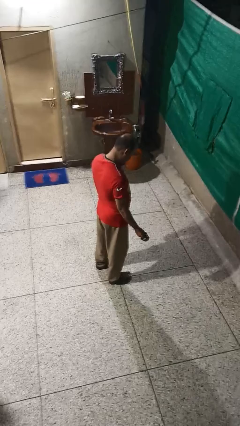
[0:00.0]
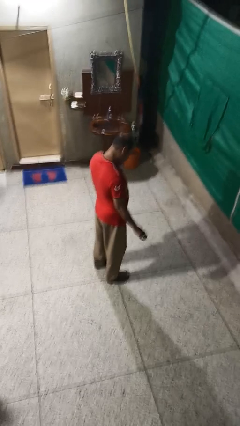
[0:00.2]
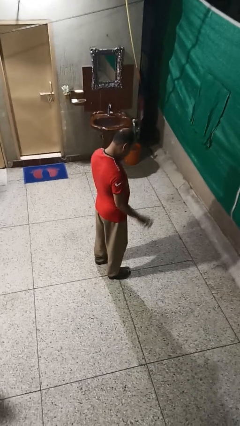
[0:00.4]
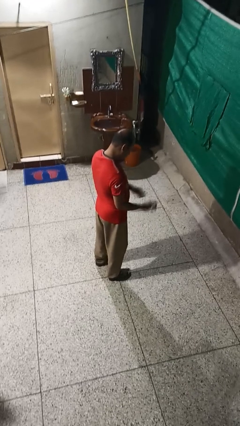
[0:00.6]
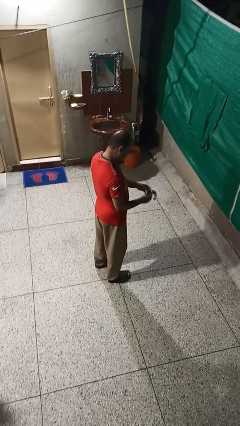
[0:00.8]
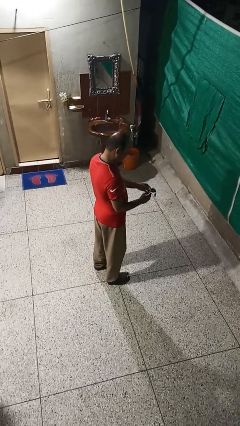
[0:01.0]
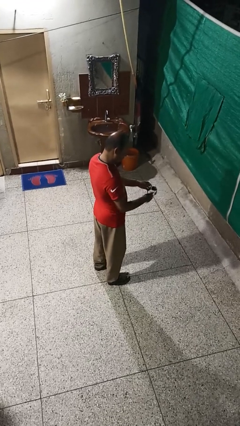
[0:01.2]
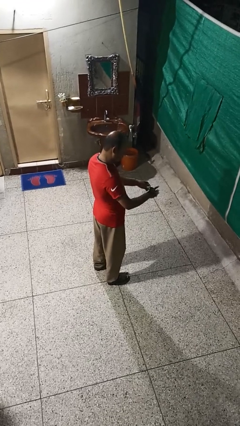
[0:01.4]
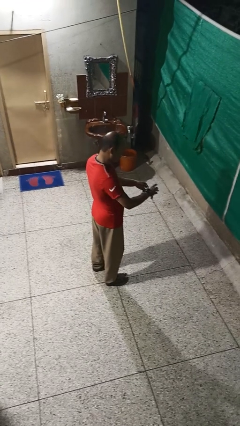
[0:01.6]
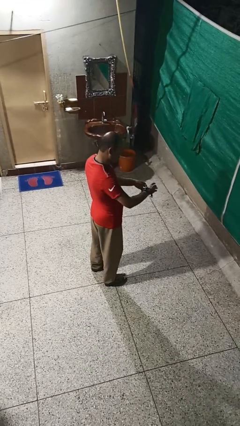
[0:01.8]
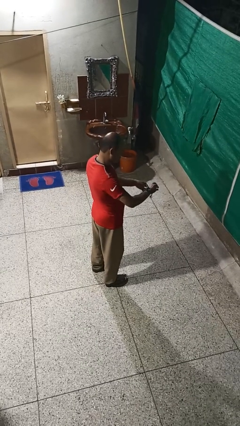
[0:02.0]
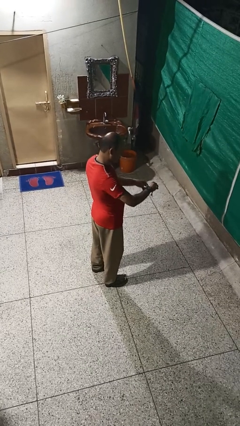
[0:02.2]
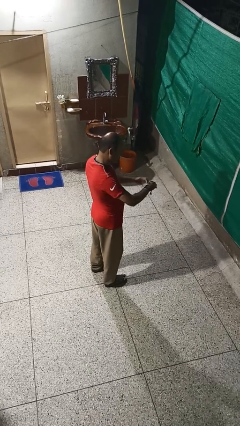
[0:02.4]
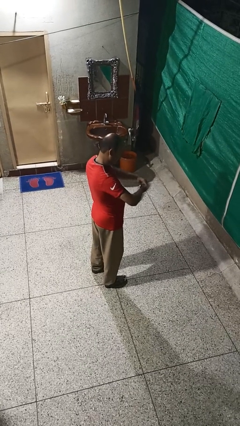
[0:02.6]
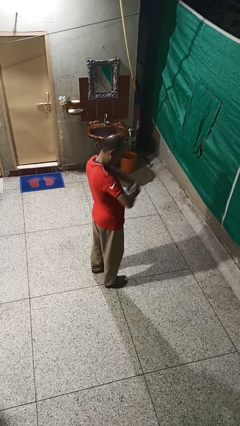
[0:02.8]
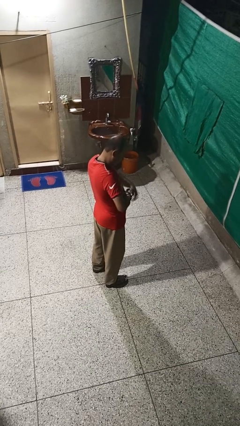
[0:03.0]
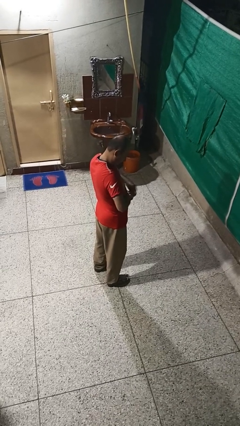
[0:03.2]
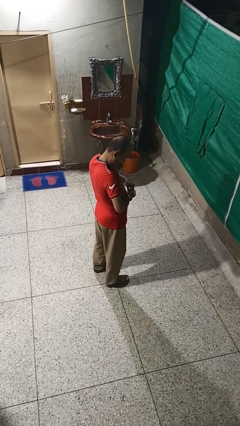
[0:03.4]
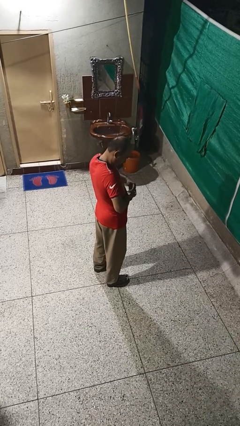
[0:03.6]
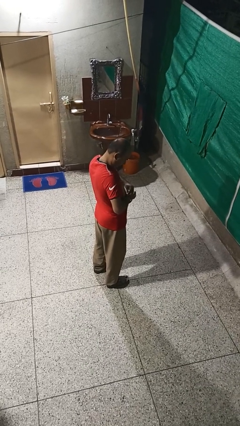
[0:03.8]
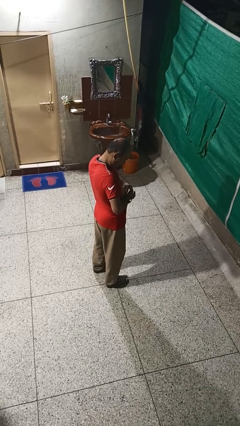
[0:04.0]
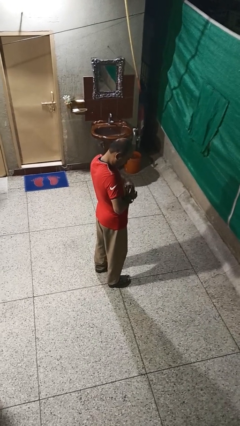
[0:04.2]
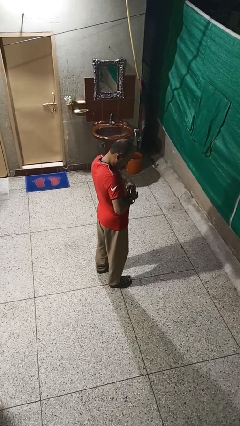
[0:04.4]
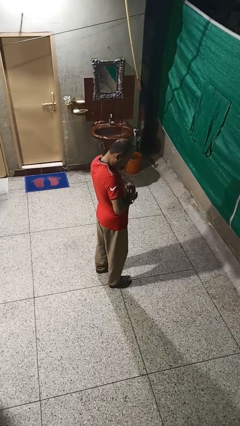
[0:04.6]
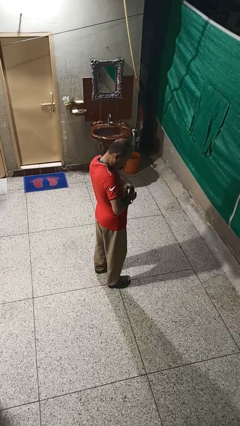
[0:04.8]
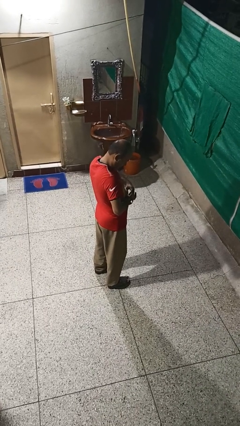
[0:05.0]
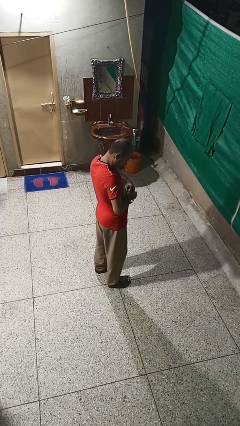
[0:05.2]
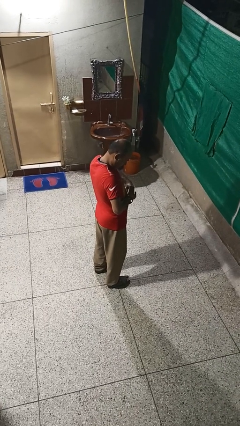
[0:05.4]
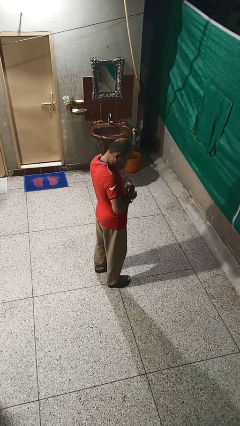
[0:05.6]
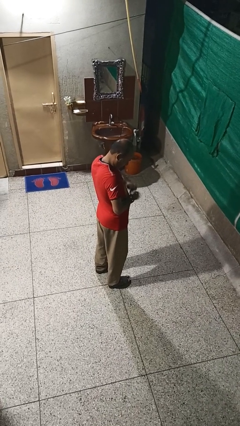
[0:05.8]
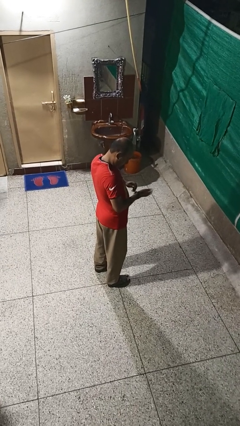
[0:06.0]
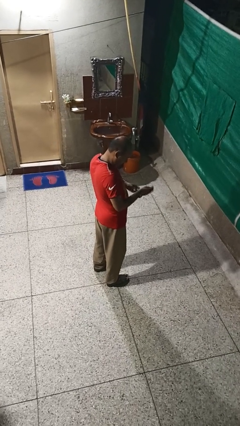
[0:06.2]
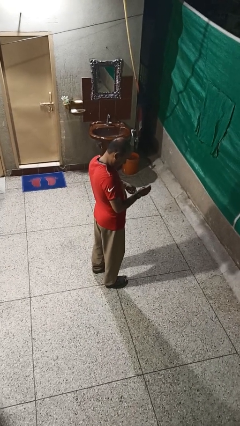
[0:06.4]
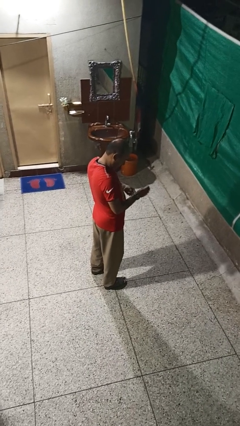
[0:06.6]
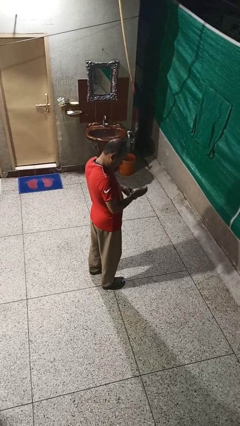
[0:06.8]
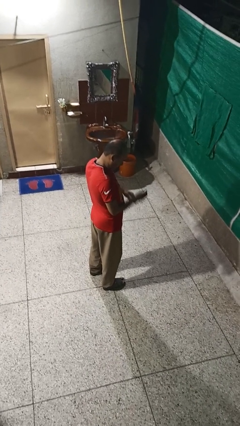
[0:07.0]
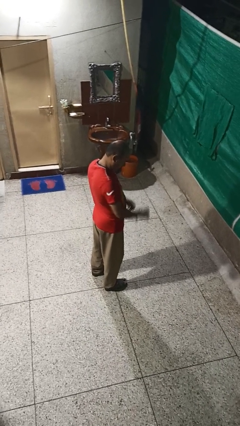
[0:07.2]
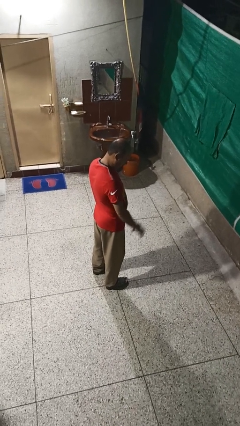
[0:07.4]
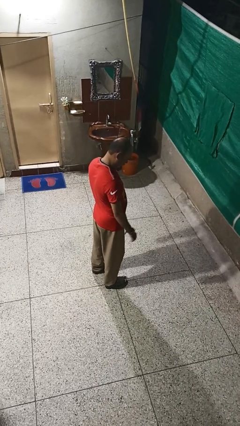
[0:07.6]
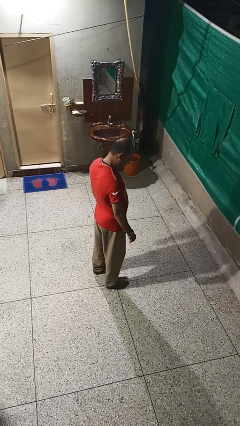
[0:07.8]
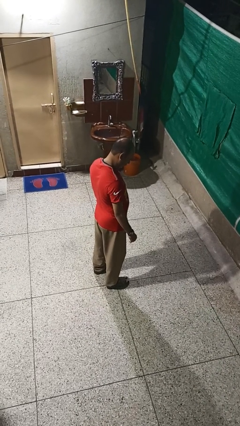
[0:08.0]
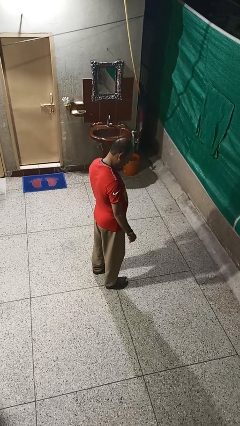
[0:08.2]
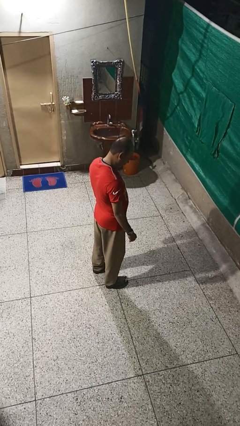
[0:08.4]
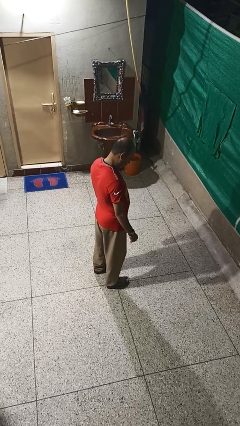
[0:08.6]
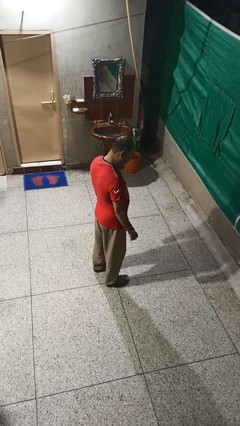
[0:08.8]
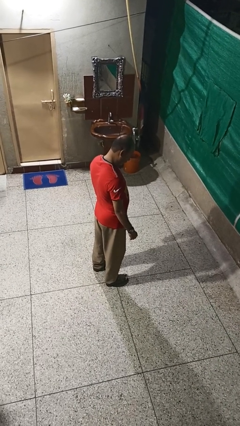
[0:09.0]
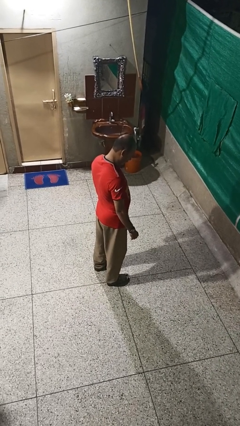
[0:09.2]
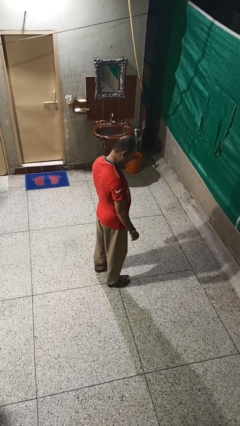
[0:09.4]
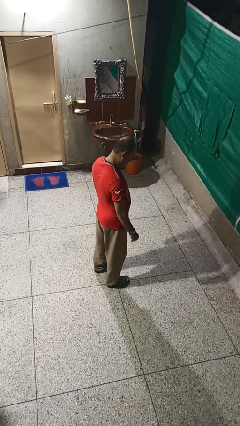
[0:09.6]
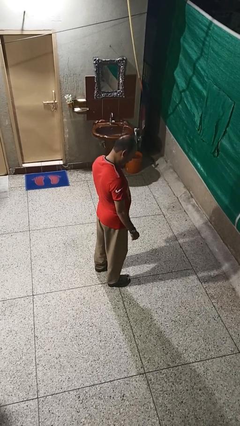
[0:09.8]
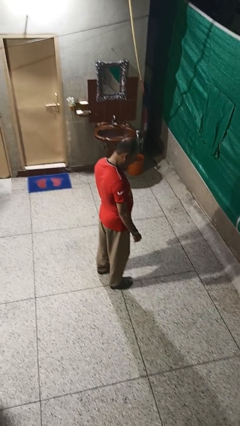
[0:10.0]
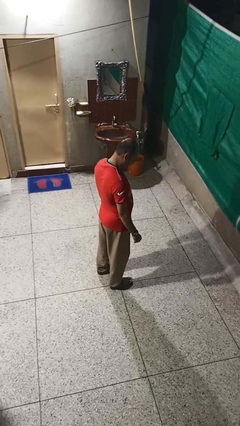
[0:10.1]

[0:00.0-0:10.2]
person puts on wristwatch

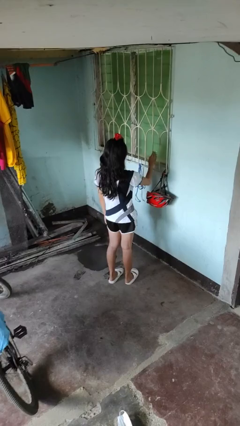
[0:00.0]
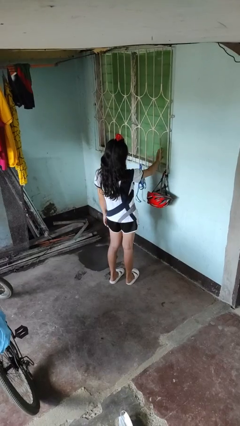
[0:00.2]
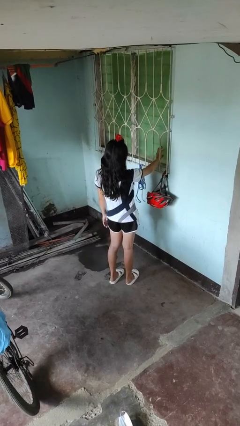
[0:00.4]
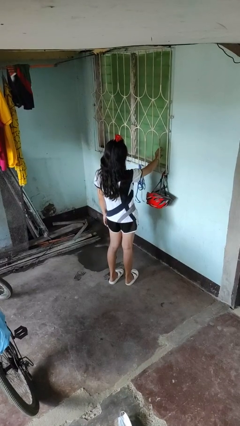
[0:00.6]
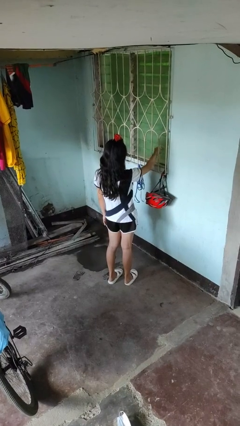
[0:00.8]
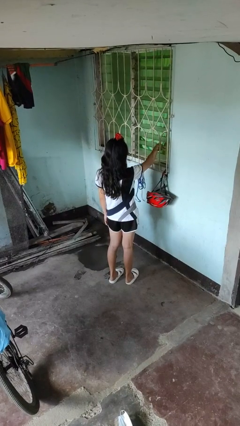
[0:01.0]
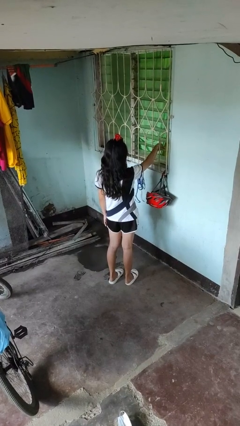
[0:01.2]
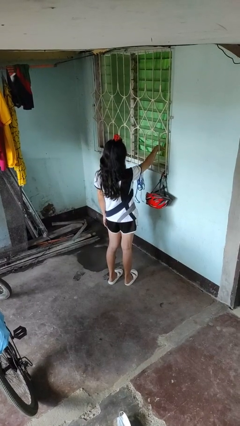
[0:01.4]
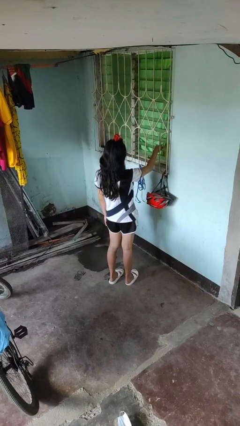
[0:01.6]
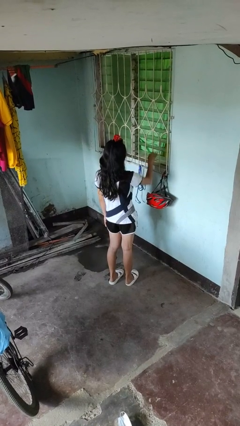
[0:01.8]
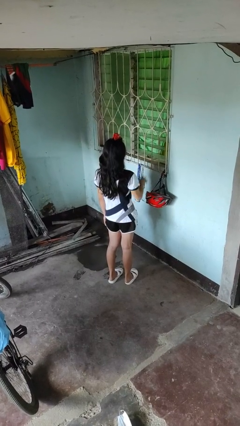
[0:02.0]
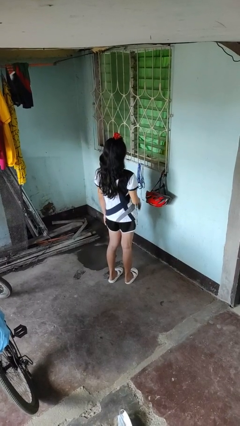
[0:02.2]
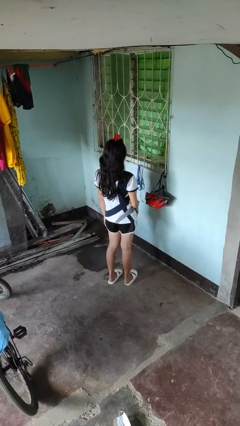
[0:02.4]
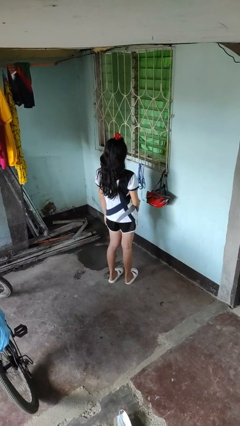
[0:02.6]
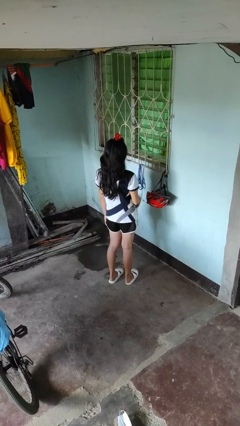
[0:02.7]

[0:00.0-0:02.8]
person opens home window

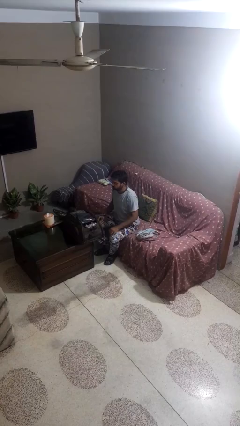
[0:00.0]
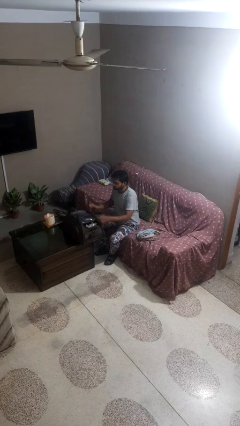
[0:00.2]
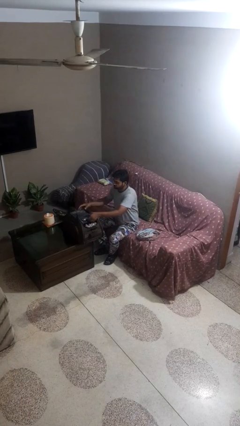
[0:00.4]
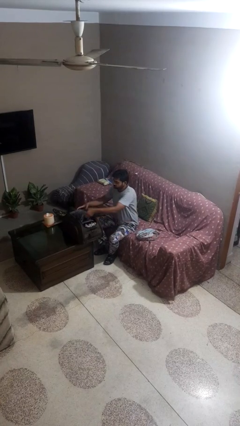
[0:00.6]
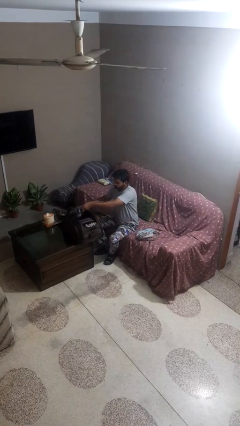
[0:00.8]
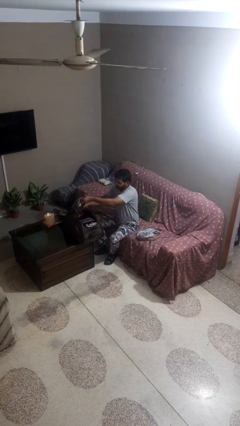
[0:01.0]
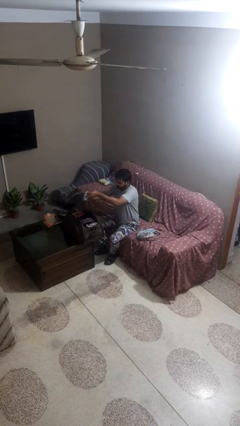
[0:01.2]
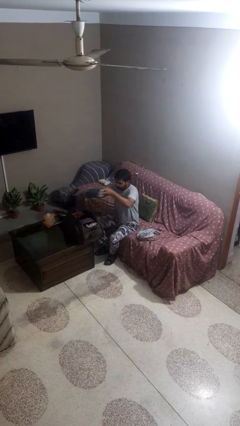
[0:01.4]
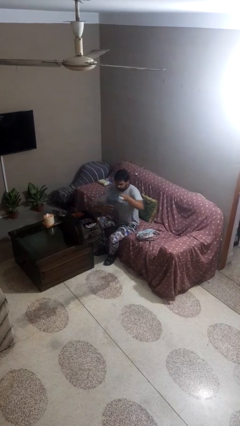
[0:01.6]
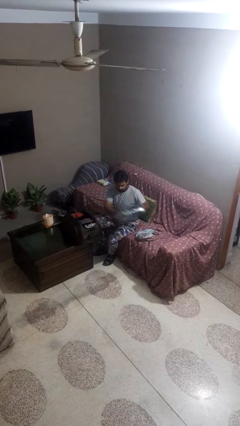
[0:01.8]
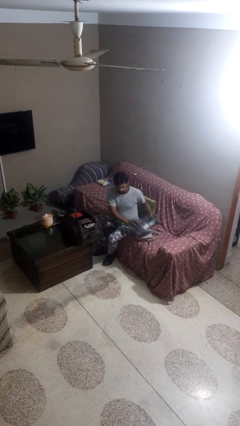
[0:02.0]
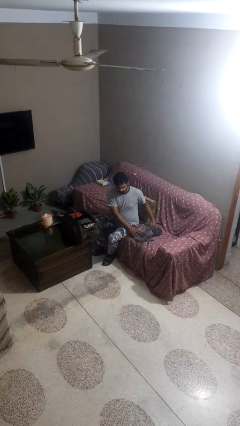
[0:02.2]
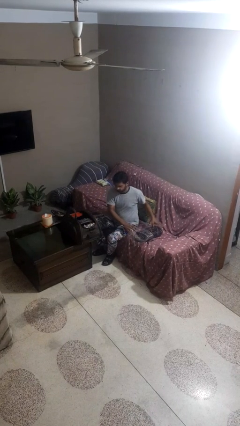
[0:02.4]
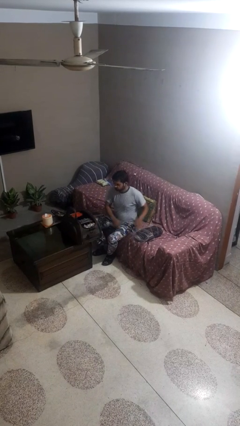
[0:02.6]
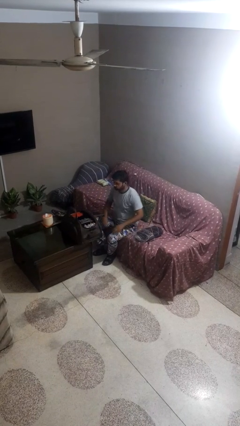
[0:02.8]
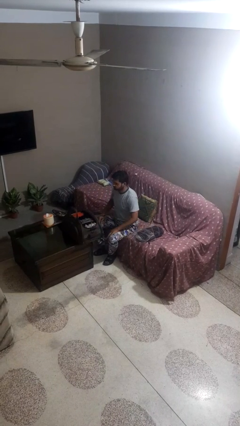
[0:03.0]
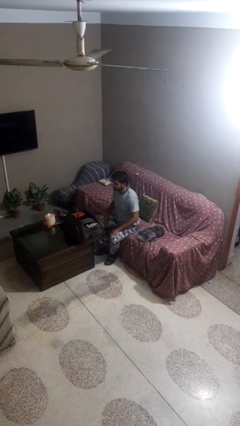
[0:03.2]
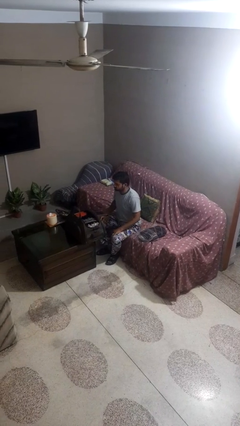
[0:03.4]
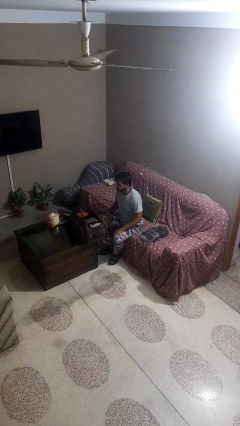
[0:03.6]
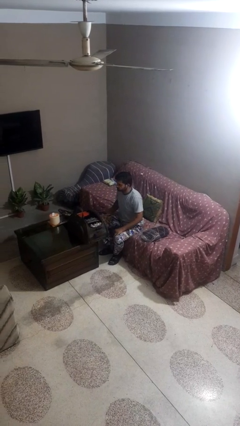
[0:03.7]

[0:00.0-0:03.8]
person unloads clothes from suitcase

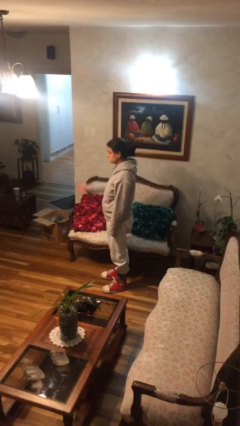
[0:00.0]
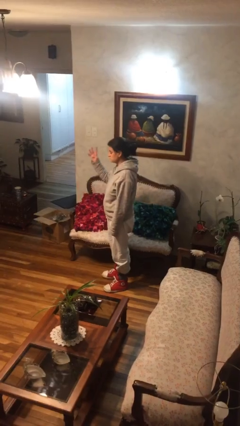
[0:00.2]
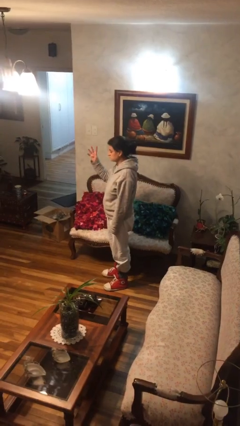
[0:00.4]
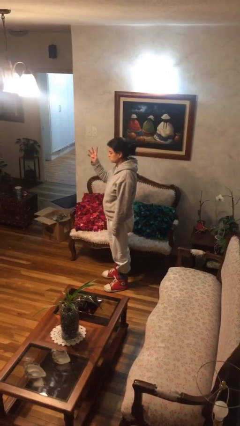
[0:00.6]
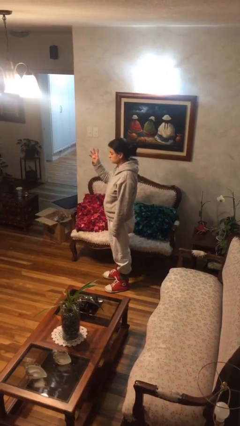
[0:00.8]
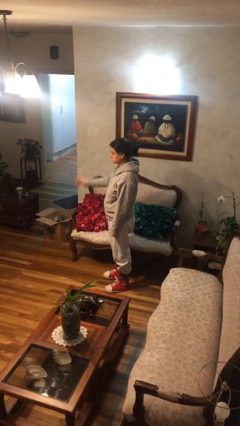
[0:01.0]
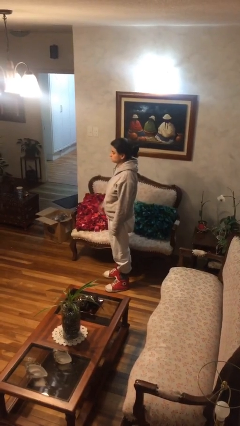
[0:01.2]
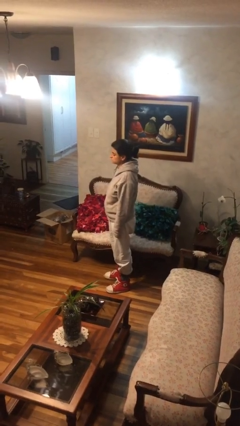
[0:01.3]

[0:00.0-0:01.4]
person gestures number four
